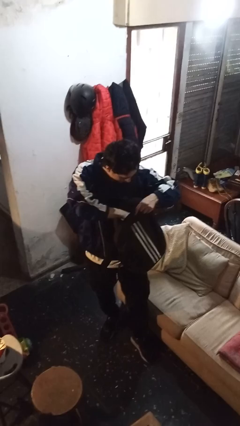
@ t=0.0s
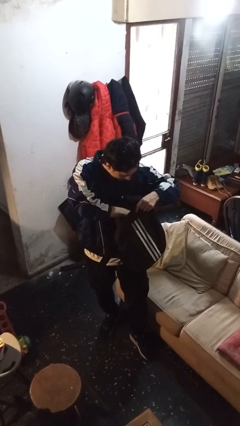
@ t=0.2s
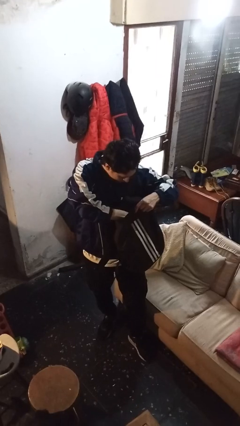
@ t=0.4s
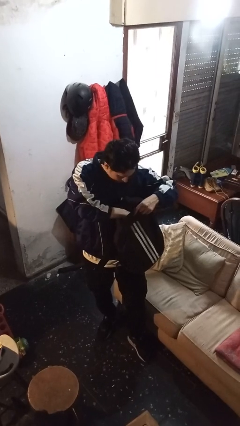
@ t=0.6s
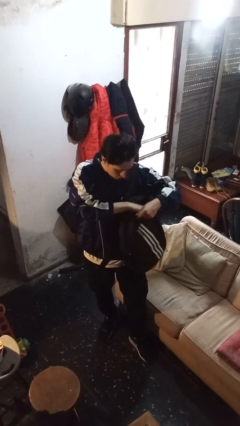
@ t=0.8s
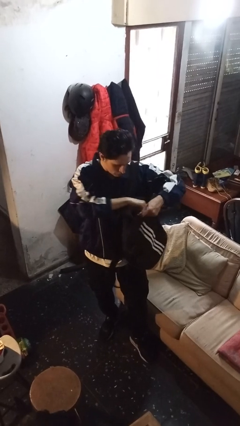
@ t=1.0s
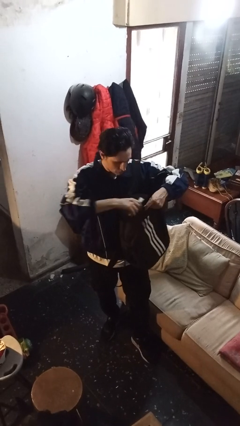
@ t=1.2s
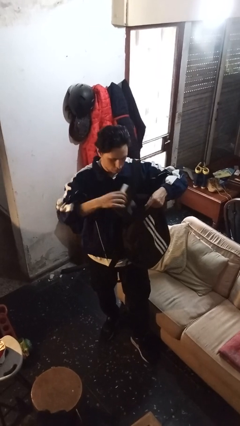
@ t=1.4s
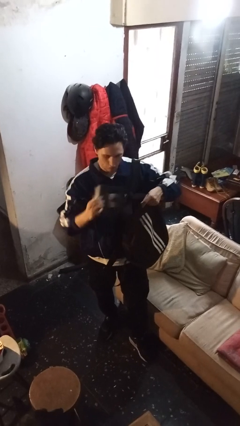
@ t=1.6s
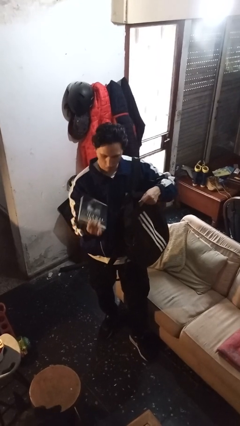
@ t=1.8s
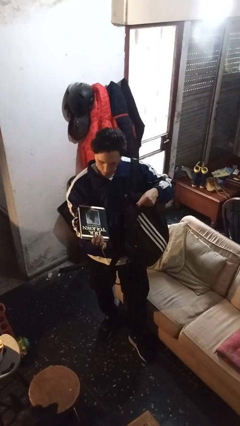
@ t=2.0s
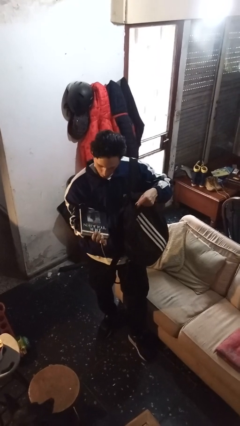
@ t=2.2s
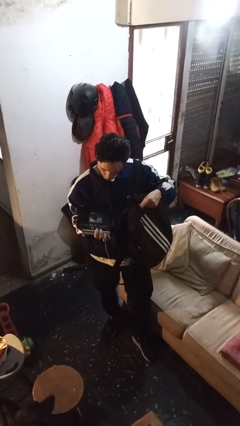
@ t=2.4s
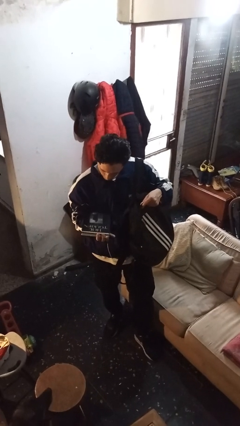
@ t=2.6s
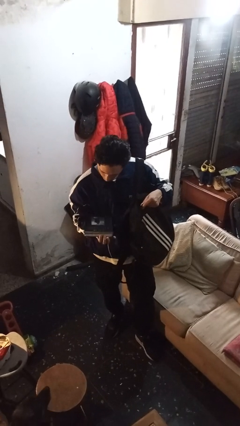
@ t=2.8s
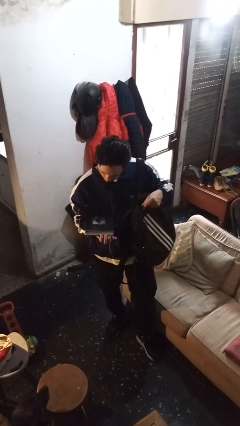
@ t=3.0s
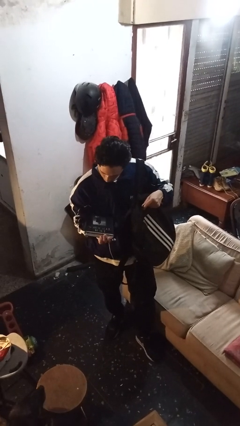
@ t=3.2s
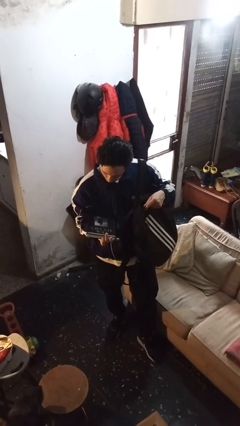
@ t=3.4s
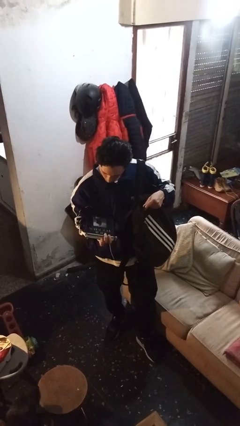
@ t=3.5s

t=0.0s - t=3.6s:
person takes object from backpack

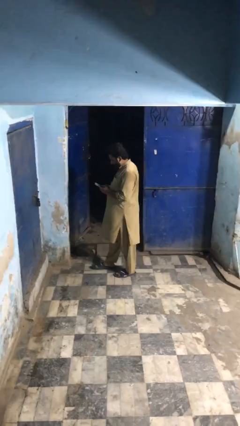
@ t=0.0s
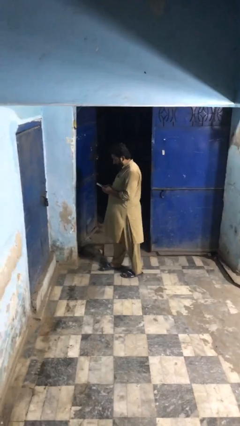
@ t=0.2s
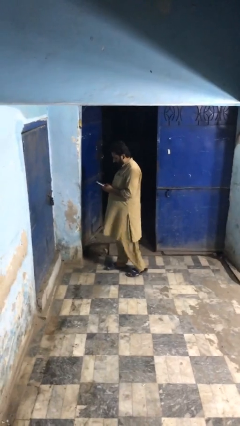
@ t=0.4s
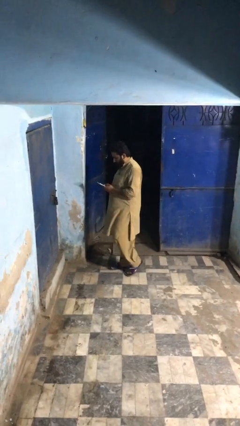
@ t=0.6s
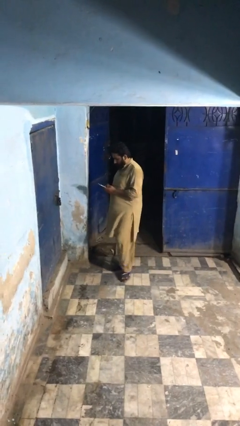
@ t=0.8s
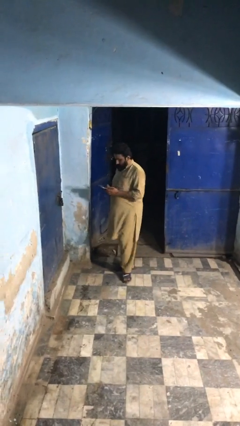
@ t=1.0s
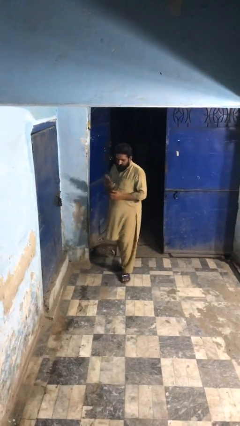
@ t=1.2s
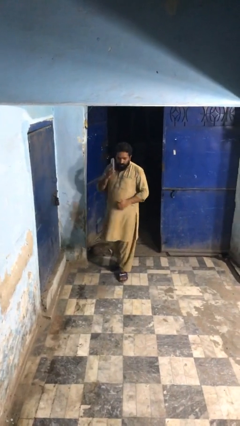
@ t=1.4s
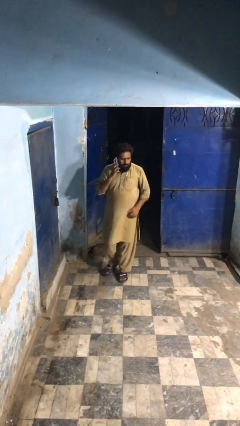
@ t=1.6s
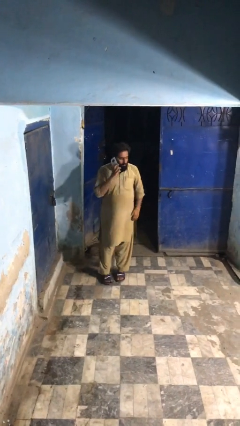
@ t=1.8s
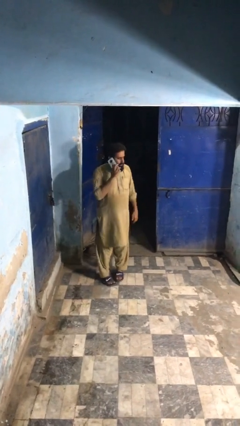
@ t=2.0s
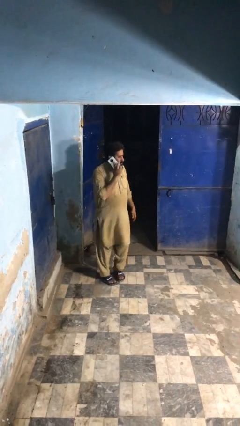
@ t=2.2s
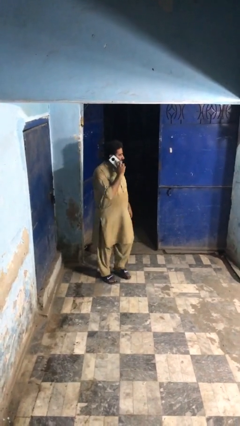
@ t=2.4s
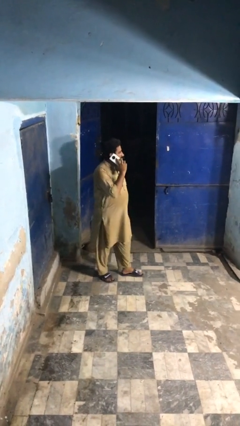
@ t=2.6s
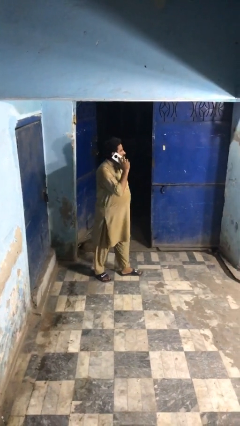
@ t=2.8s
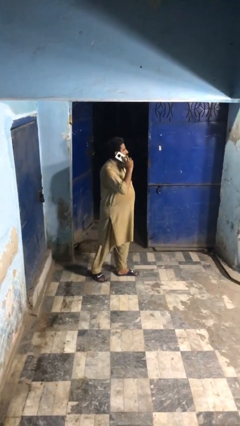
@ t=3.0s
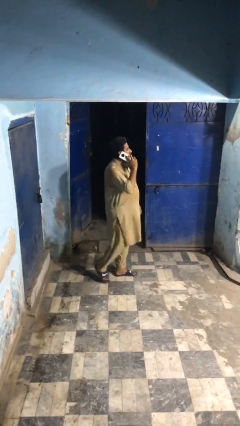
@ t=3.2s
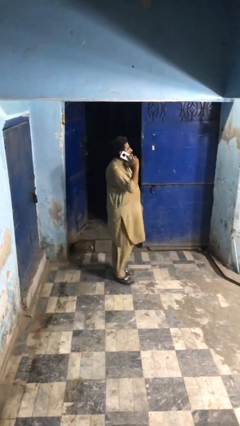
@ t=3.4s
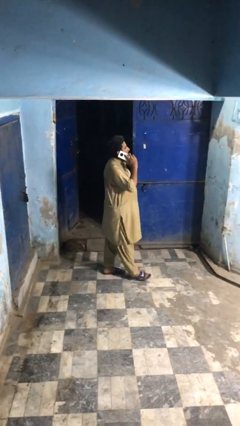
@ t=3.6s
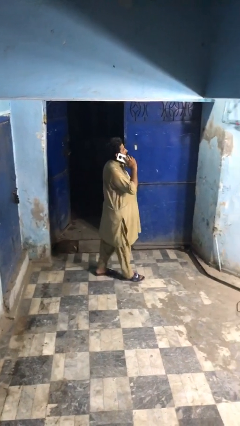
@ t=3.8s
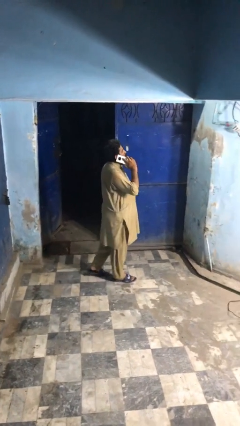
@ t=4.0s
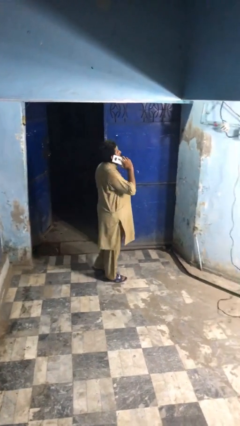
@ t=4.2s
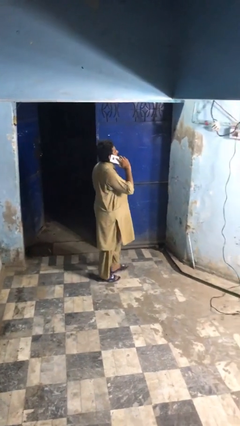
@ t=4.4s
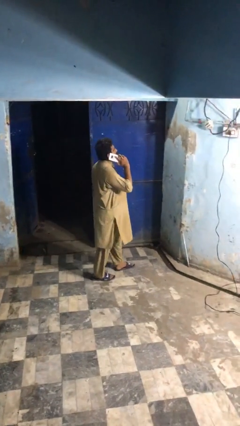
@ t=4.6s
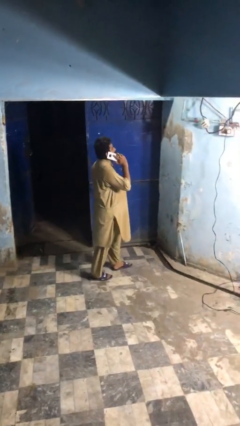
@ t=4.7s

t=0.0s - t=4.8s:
person talks on phone

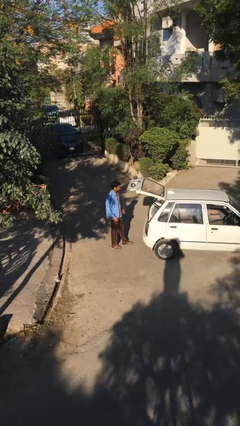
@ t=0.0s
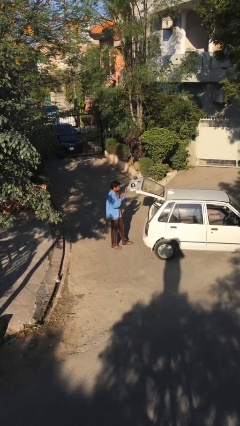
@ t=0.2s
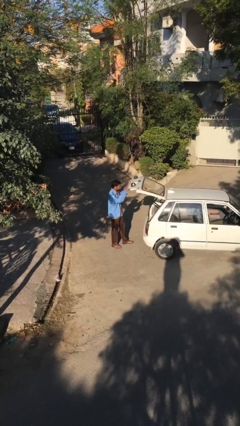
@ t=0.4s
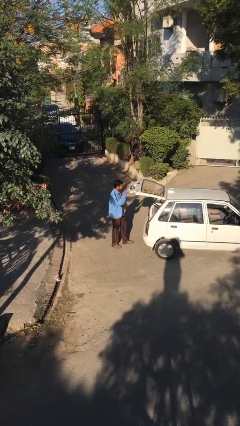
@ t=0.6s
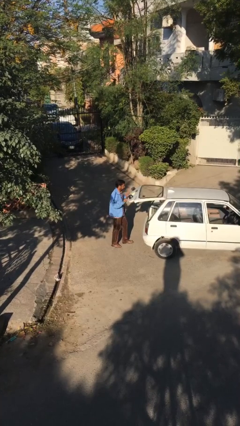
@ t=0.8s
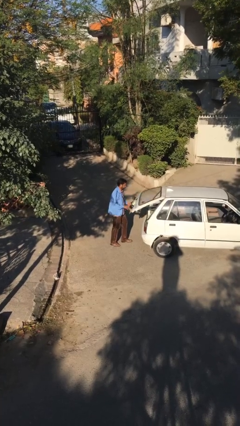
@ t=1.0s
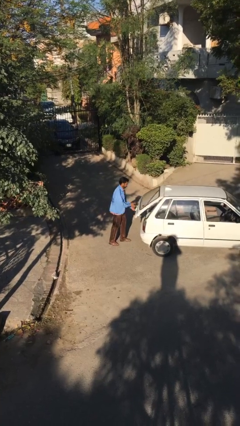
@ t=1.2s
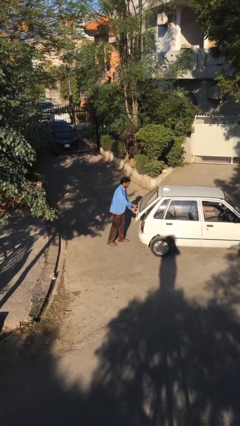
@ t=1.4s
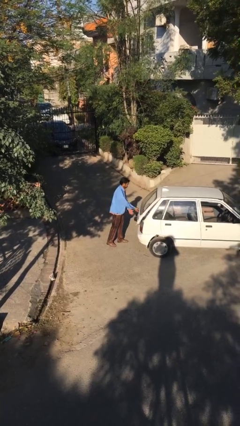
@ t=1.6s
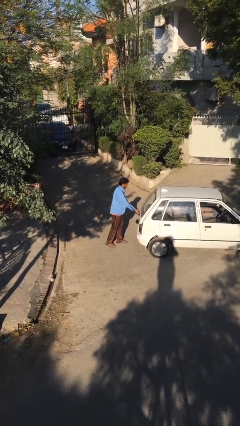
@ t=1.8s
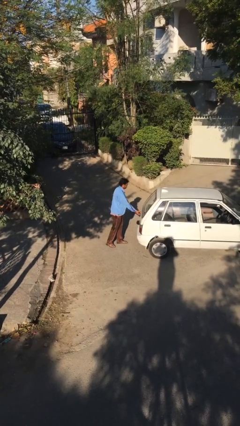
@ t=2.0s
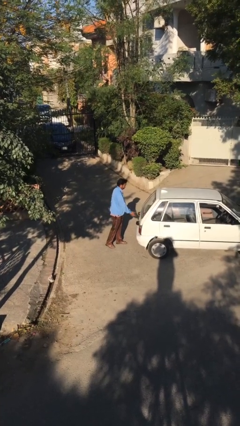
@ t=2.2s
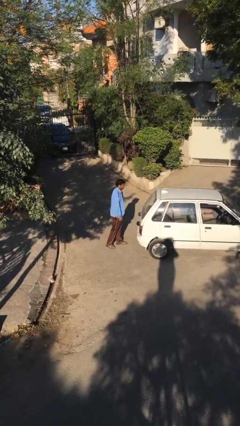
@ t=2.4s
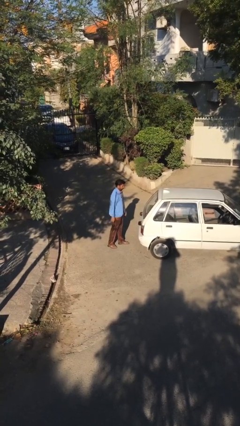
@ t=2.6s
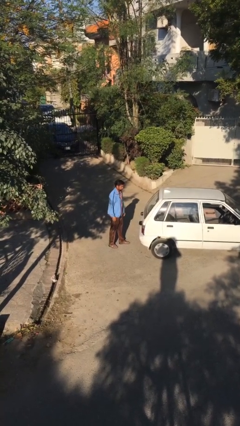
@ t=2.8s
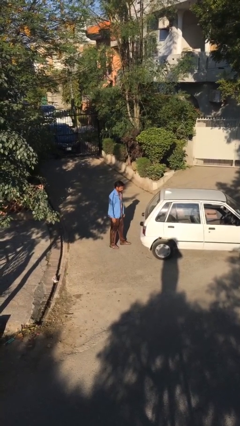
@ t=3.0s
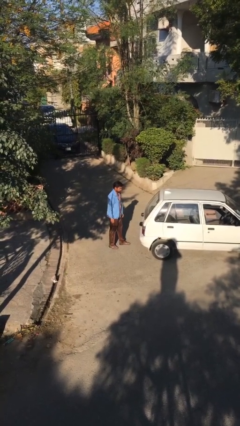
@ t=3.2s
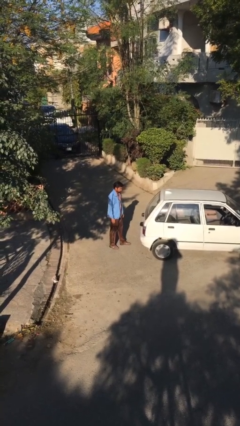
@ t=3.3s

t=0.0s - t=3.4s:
person closes car trunk

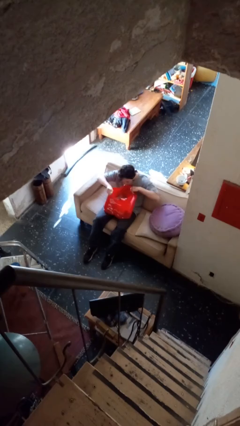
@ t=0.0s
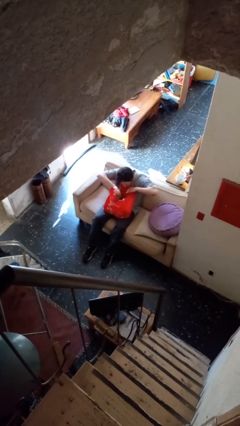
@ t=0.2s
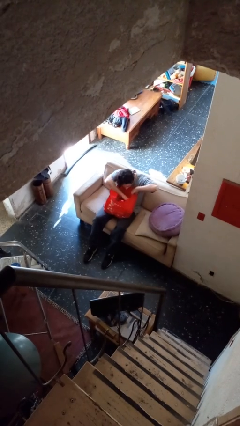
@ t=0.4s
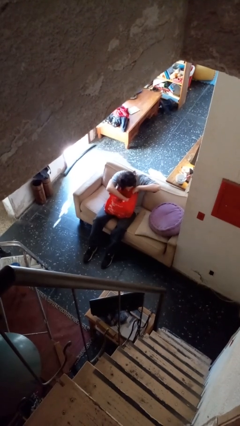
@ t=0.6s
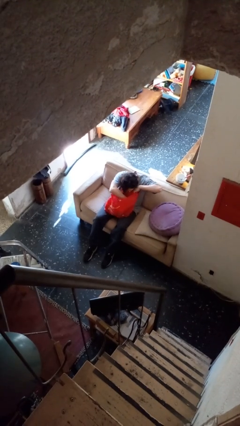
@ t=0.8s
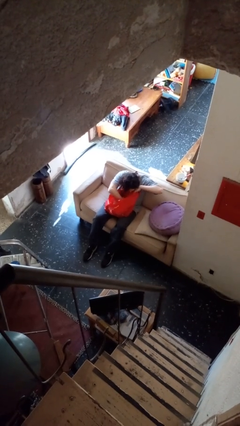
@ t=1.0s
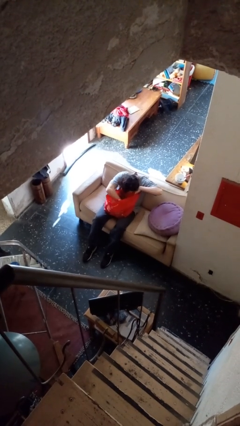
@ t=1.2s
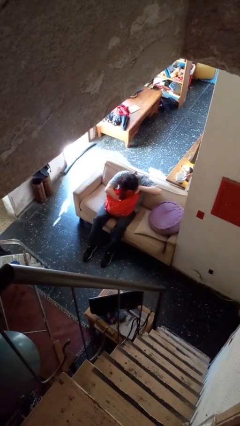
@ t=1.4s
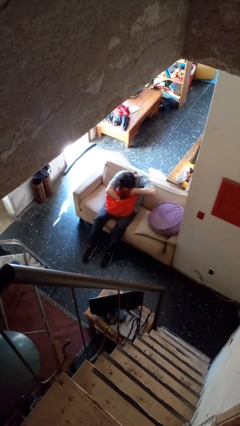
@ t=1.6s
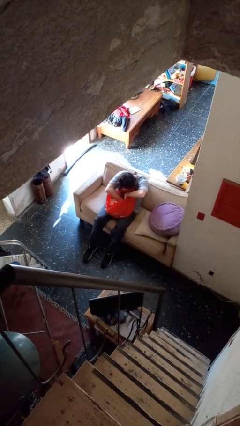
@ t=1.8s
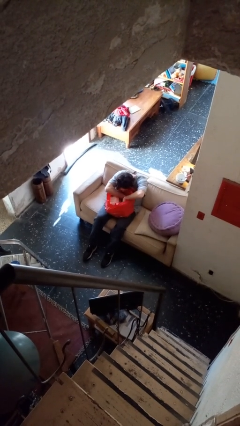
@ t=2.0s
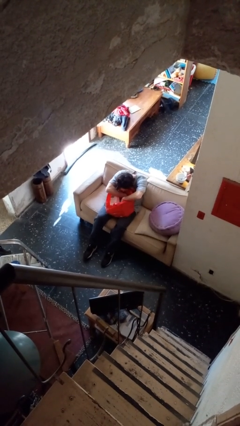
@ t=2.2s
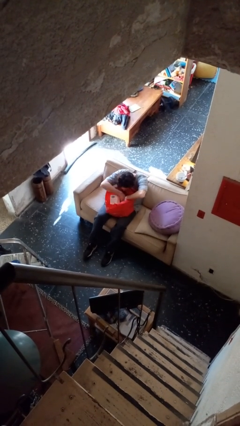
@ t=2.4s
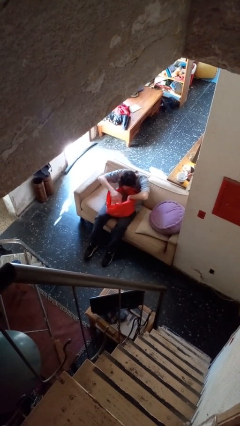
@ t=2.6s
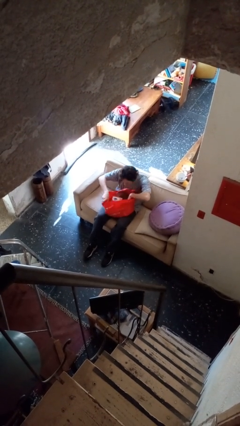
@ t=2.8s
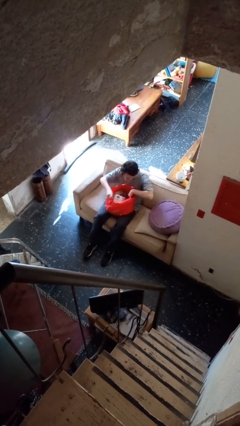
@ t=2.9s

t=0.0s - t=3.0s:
person searches in bag

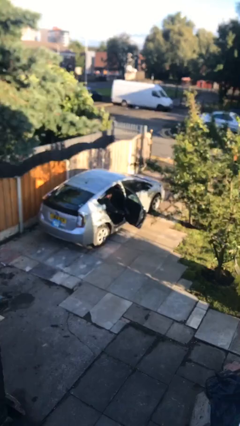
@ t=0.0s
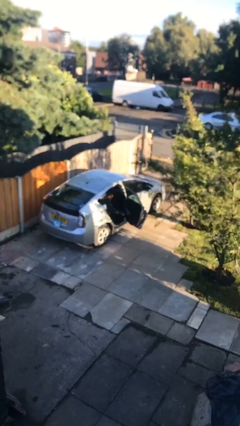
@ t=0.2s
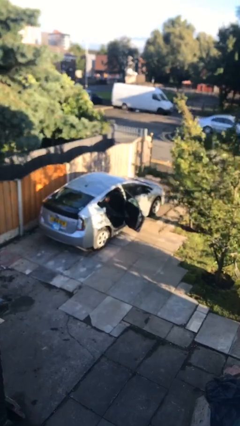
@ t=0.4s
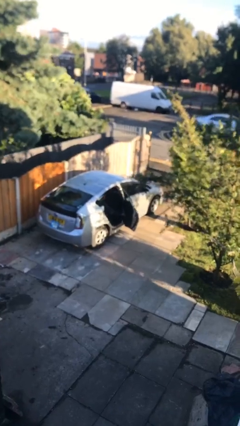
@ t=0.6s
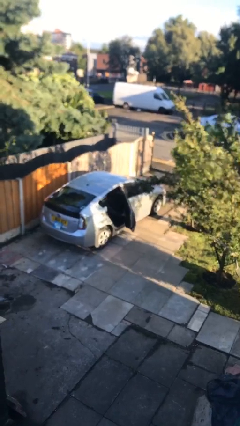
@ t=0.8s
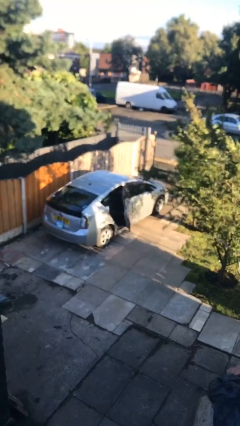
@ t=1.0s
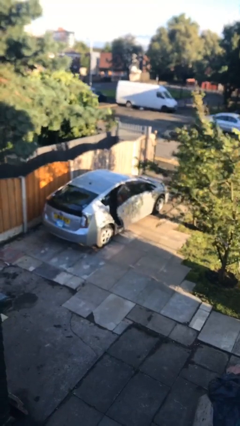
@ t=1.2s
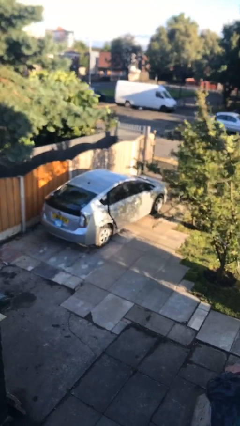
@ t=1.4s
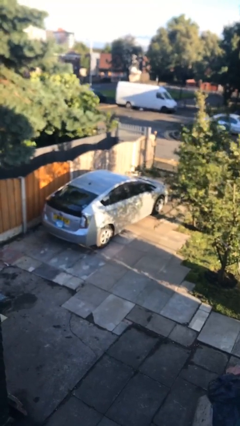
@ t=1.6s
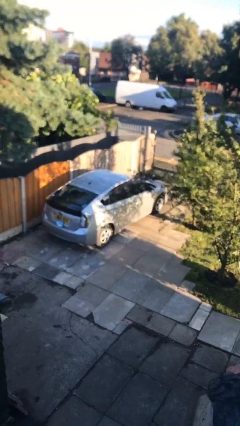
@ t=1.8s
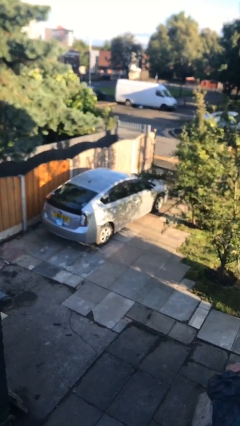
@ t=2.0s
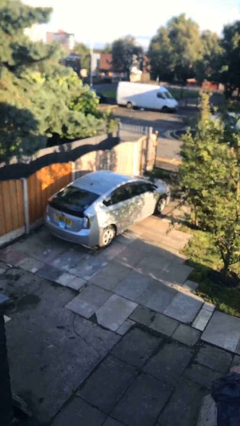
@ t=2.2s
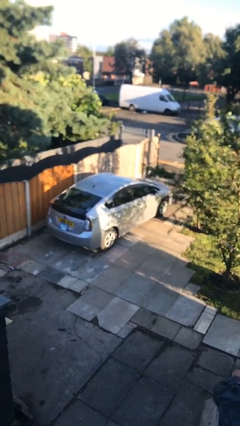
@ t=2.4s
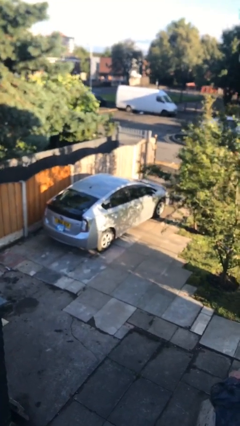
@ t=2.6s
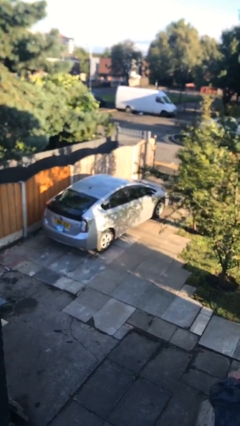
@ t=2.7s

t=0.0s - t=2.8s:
person closes car door
